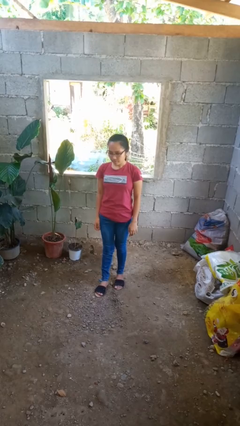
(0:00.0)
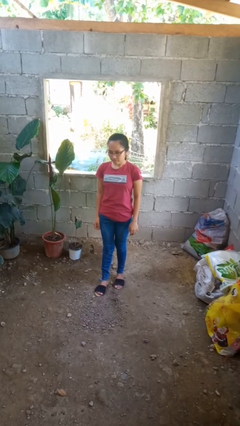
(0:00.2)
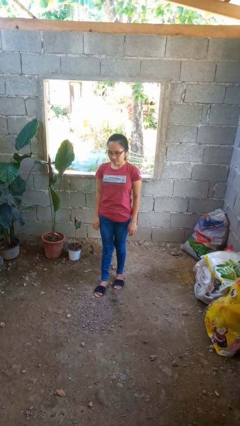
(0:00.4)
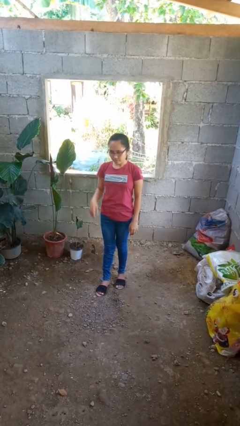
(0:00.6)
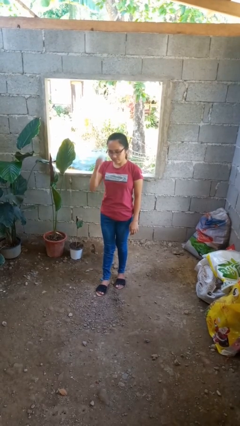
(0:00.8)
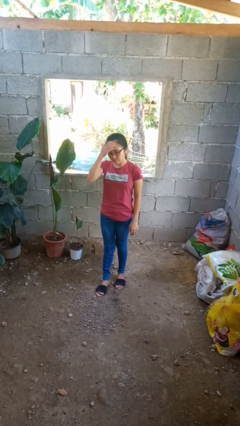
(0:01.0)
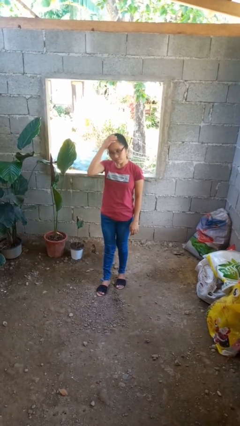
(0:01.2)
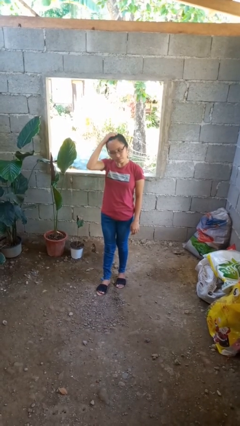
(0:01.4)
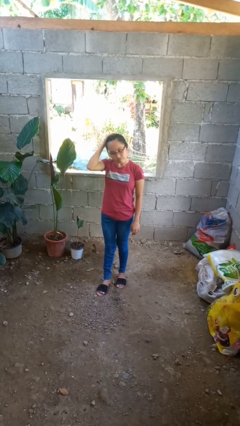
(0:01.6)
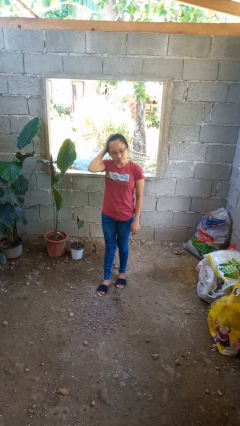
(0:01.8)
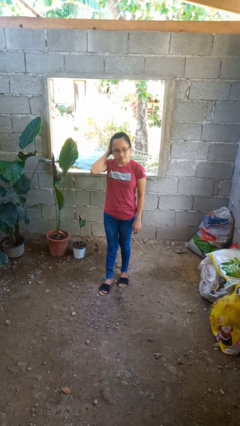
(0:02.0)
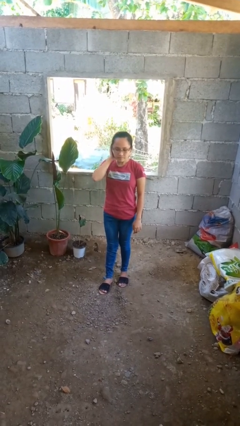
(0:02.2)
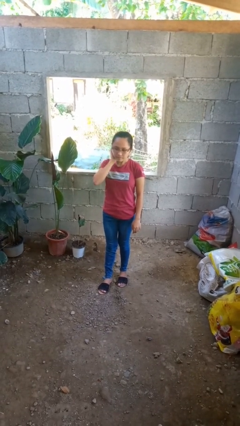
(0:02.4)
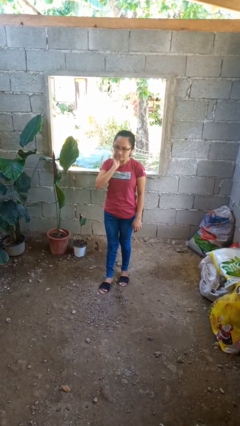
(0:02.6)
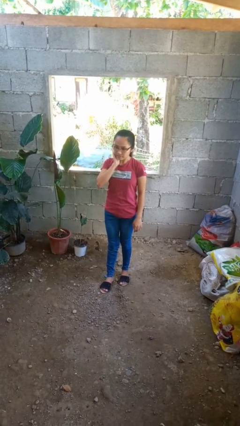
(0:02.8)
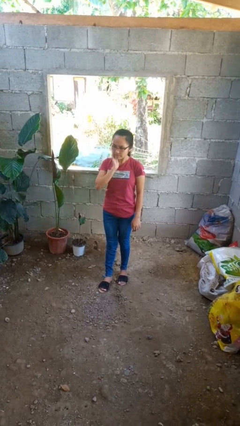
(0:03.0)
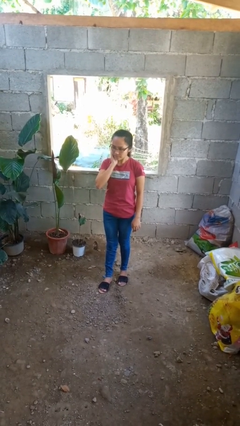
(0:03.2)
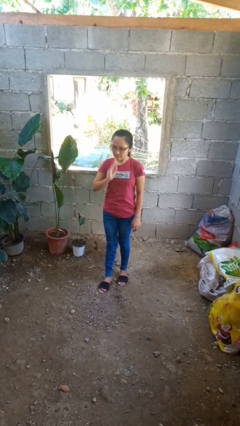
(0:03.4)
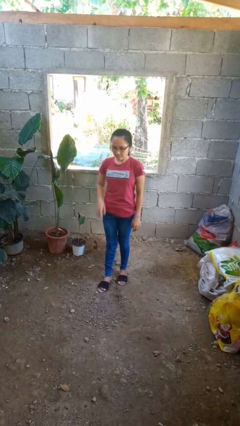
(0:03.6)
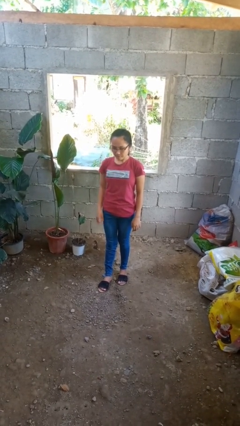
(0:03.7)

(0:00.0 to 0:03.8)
person scratches face

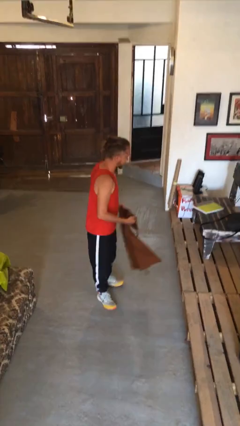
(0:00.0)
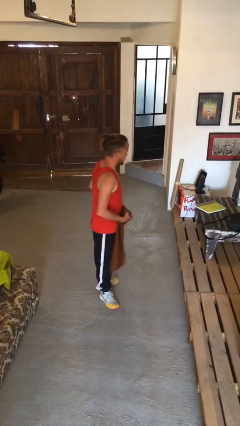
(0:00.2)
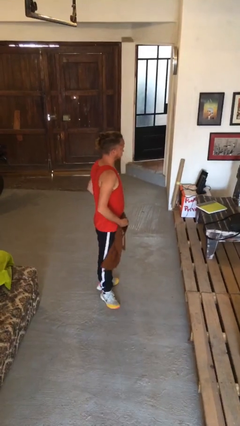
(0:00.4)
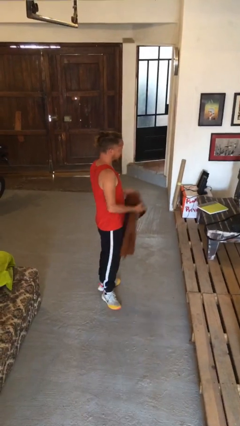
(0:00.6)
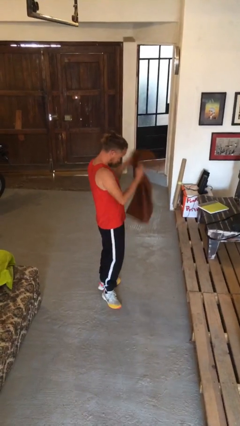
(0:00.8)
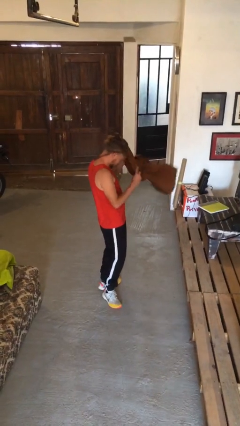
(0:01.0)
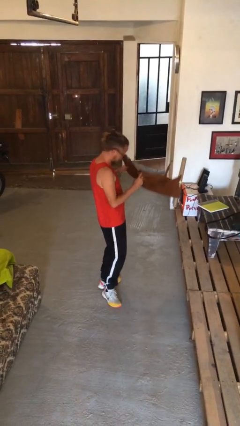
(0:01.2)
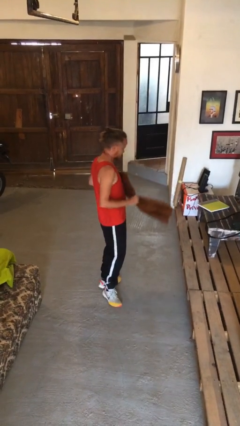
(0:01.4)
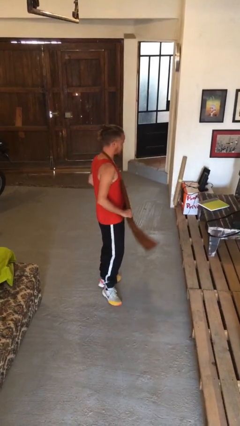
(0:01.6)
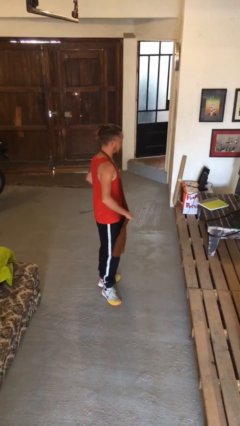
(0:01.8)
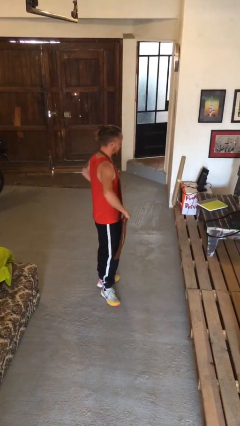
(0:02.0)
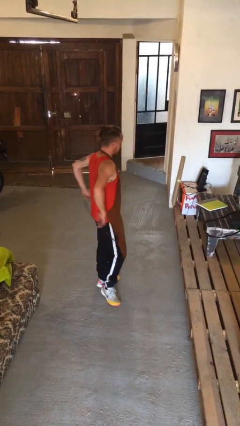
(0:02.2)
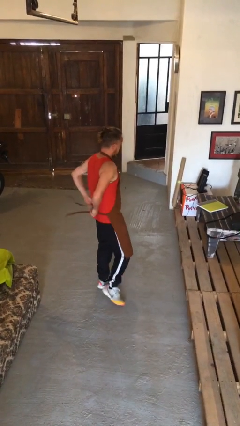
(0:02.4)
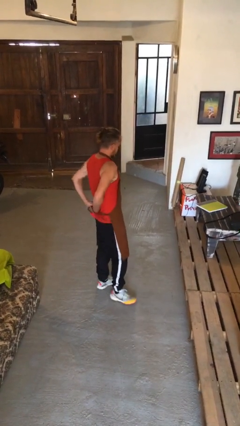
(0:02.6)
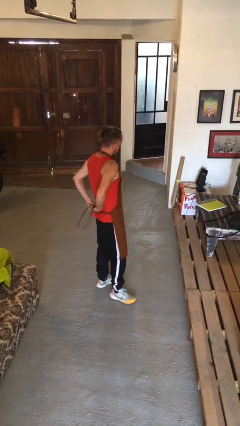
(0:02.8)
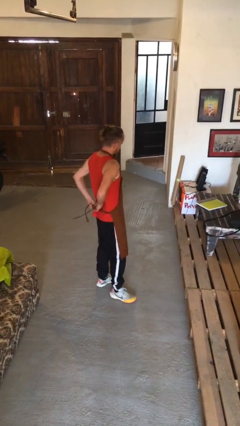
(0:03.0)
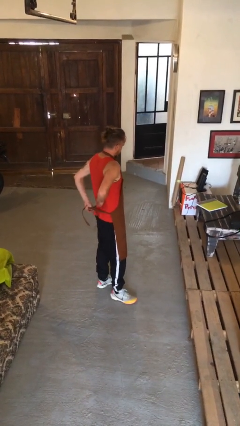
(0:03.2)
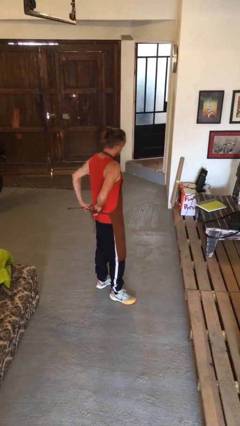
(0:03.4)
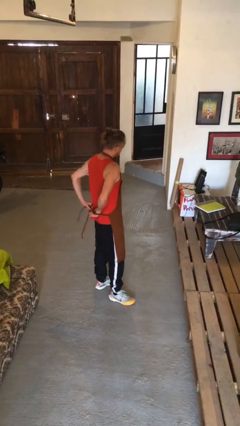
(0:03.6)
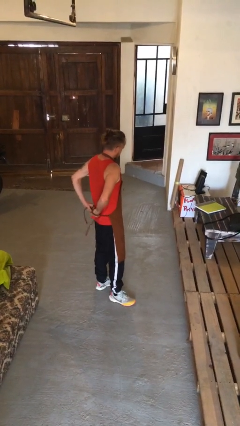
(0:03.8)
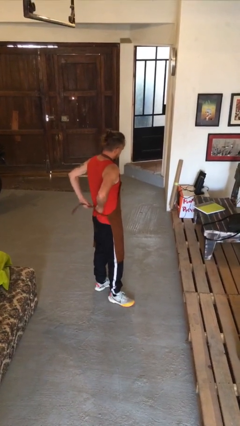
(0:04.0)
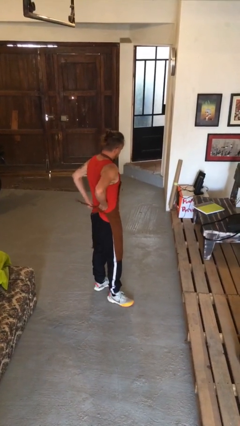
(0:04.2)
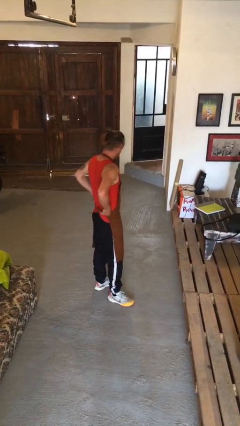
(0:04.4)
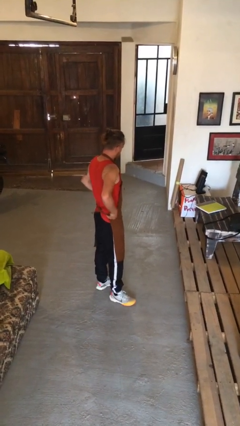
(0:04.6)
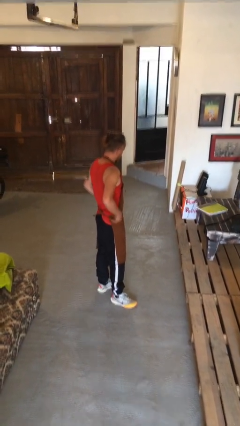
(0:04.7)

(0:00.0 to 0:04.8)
person puts on apron

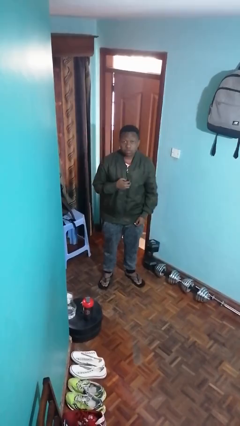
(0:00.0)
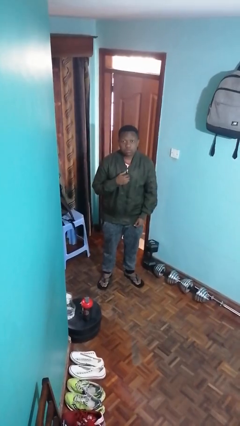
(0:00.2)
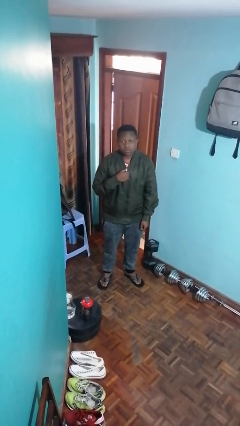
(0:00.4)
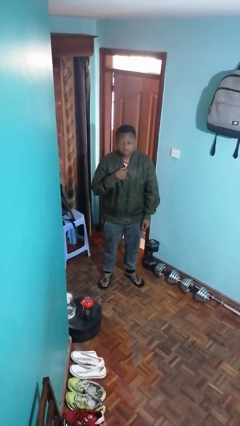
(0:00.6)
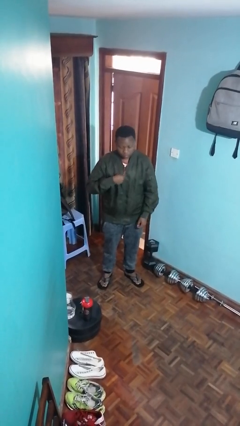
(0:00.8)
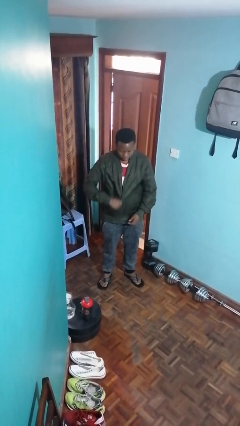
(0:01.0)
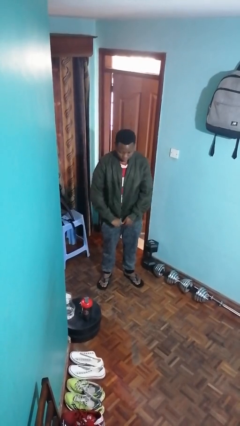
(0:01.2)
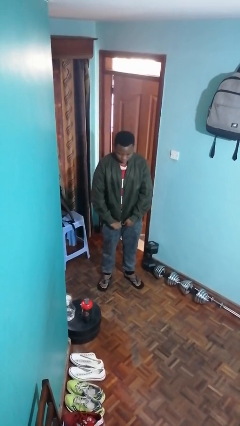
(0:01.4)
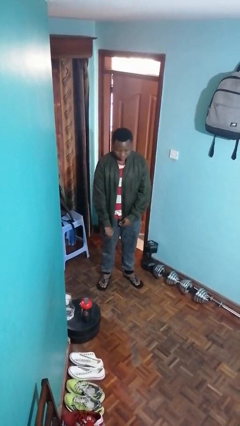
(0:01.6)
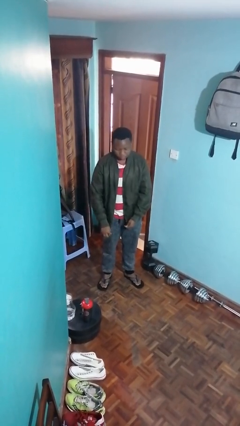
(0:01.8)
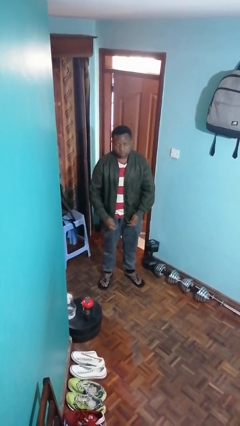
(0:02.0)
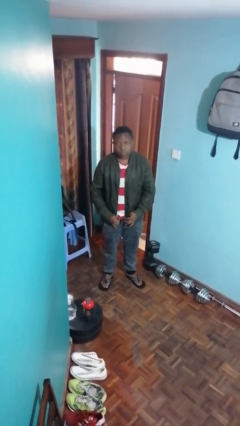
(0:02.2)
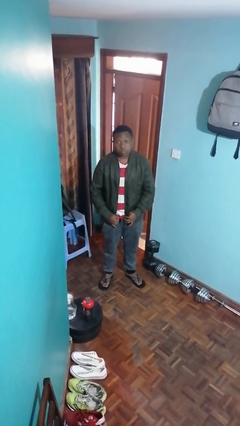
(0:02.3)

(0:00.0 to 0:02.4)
person unzips jacket

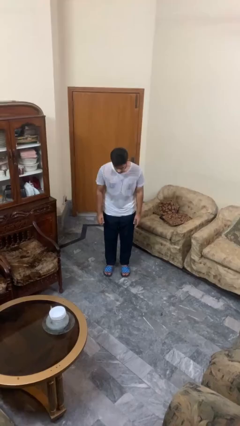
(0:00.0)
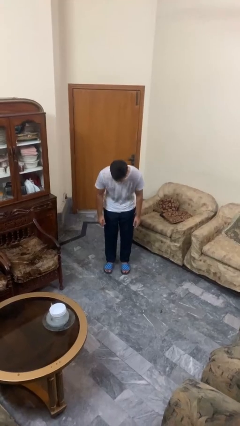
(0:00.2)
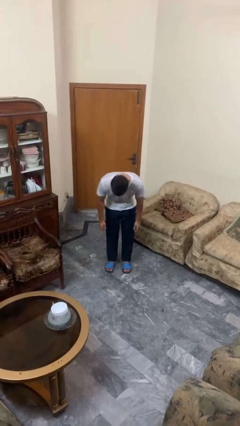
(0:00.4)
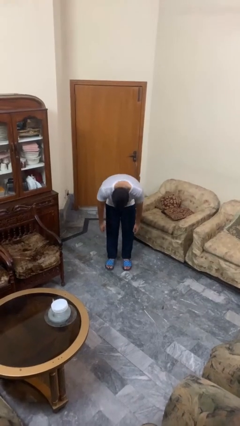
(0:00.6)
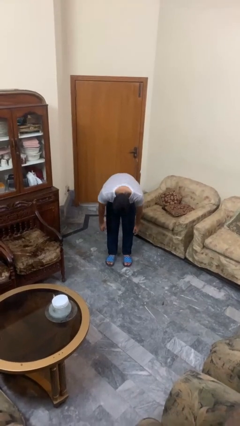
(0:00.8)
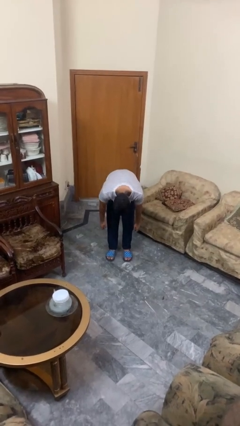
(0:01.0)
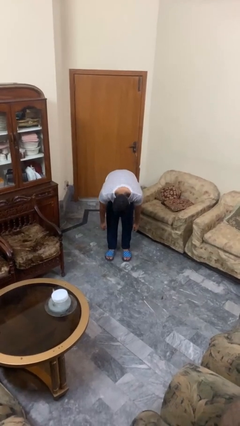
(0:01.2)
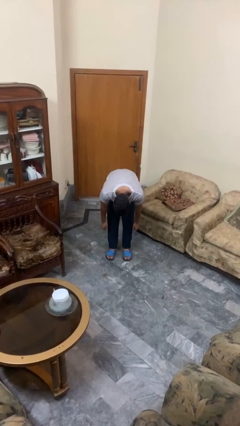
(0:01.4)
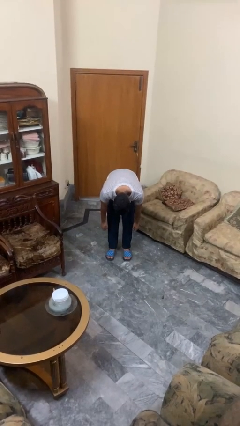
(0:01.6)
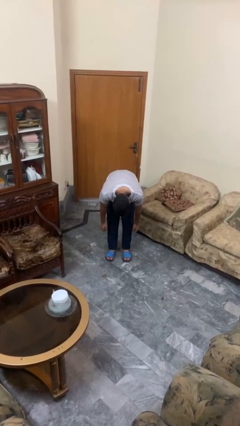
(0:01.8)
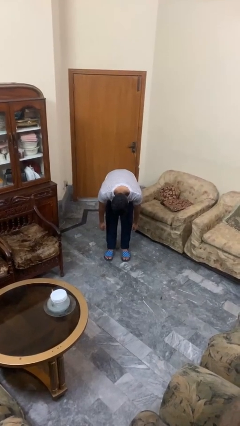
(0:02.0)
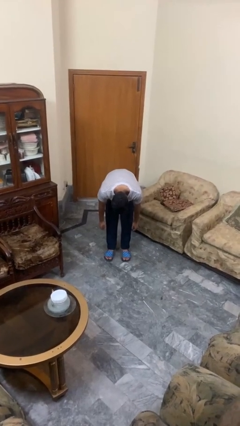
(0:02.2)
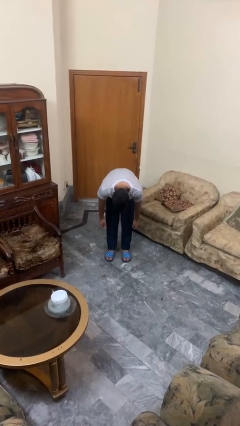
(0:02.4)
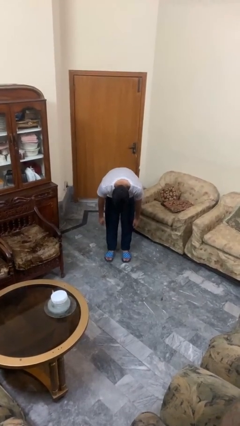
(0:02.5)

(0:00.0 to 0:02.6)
person bows

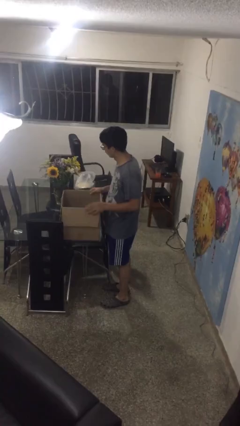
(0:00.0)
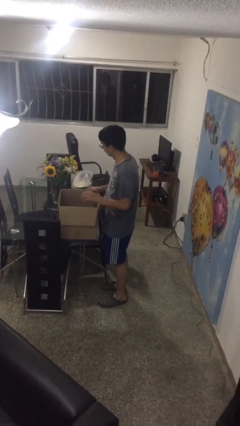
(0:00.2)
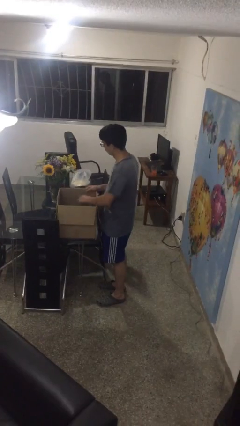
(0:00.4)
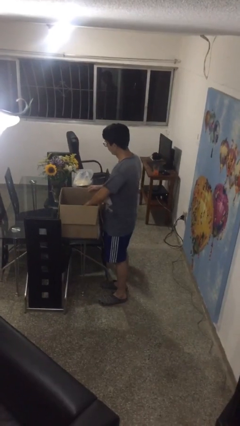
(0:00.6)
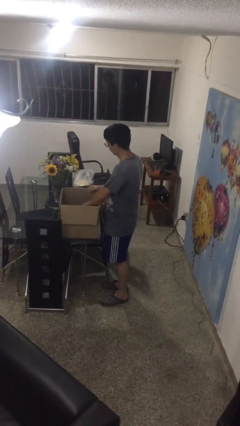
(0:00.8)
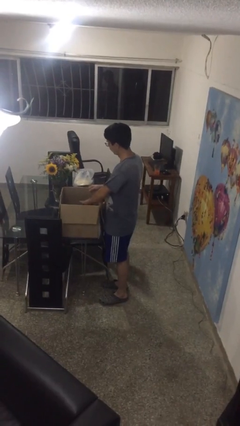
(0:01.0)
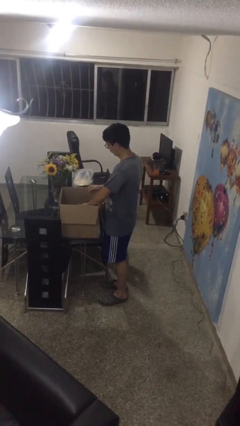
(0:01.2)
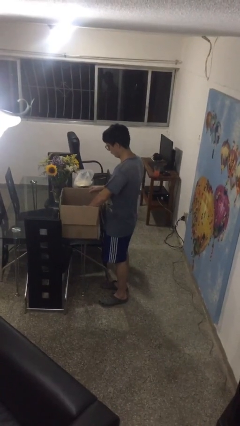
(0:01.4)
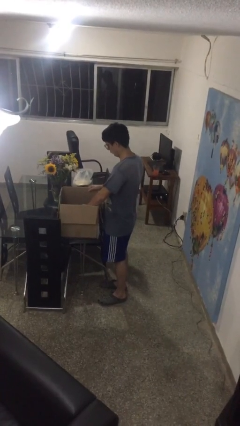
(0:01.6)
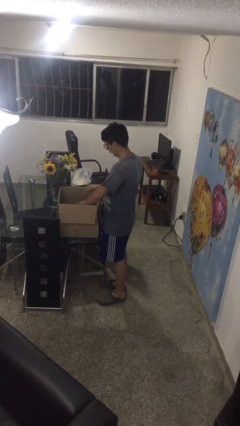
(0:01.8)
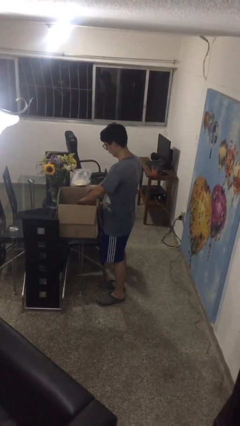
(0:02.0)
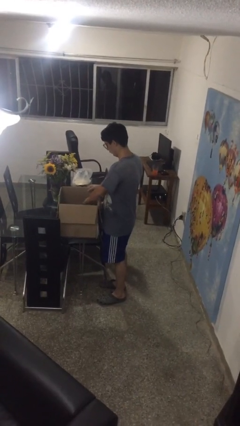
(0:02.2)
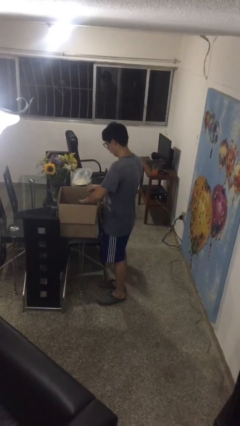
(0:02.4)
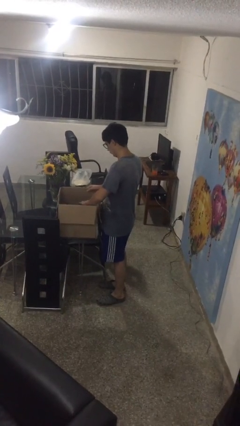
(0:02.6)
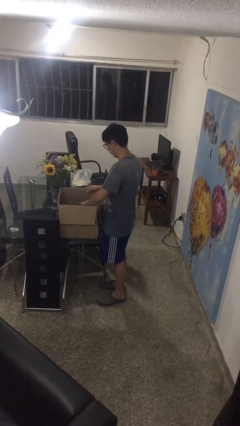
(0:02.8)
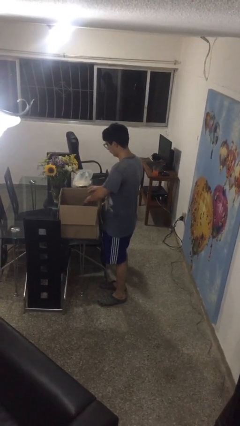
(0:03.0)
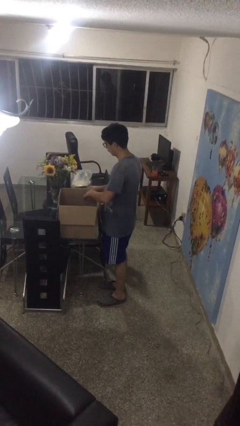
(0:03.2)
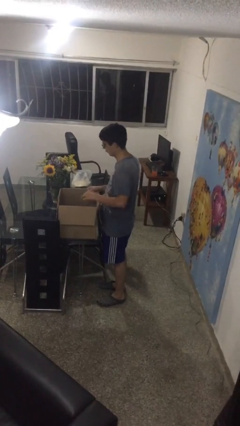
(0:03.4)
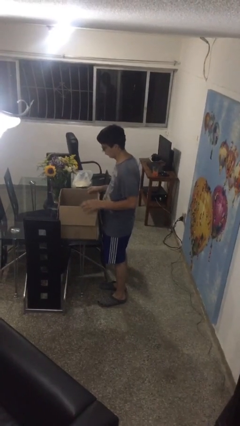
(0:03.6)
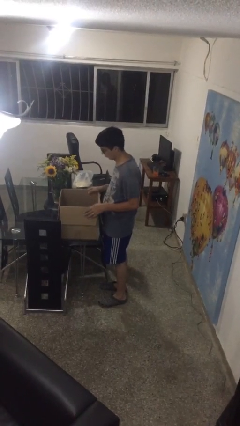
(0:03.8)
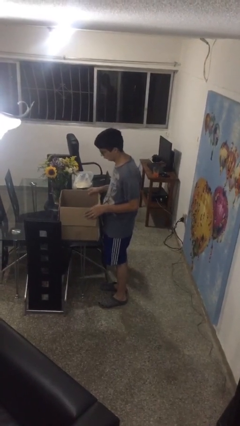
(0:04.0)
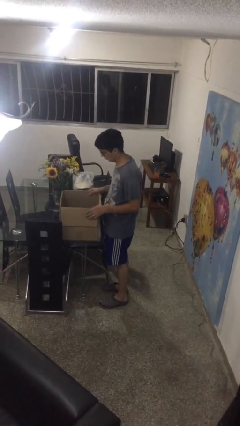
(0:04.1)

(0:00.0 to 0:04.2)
person searches in box
